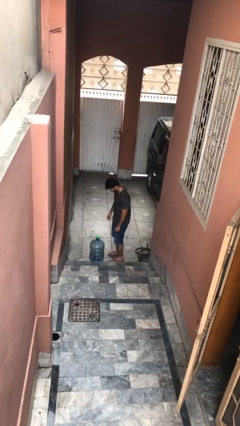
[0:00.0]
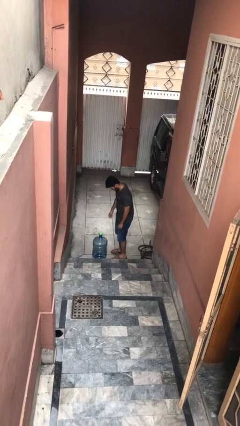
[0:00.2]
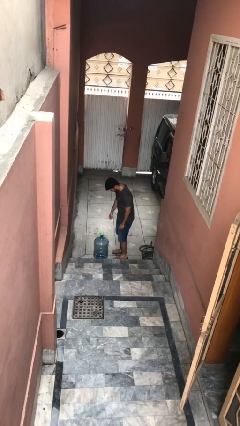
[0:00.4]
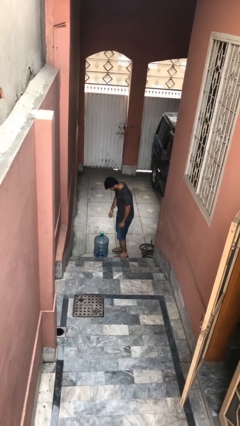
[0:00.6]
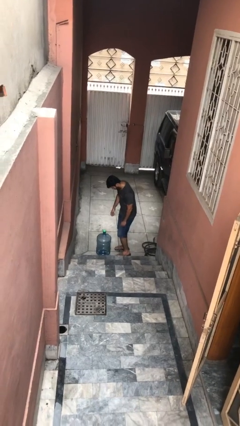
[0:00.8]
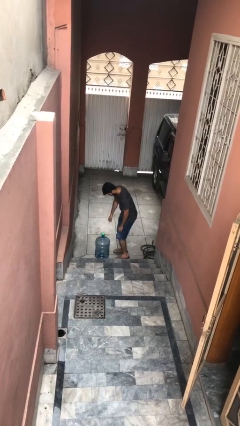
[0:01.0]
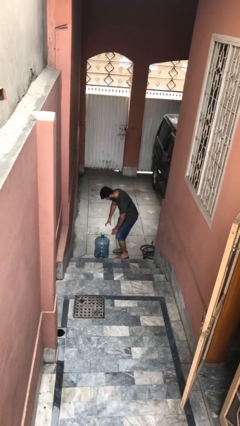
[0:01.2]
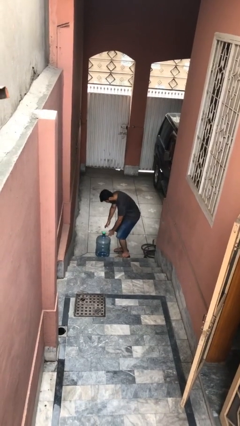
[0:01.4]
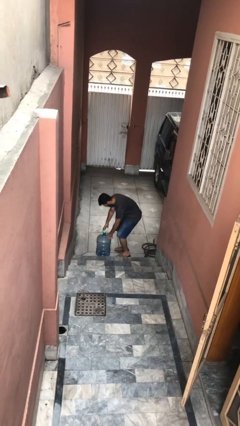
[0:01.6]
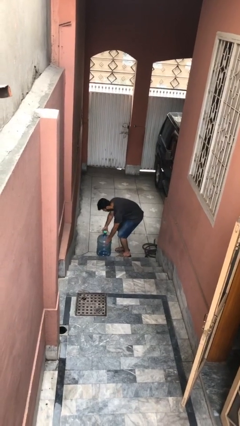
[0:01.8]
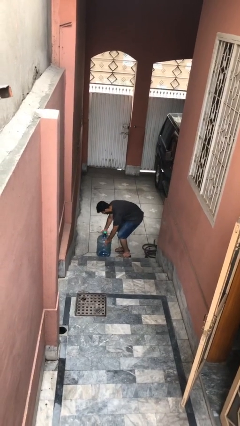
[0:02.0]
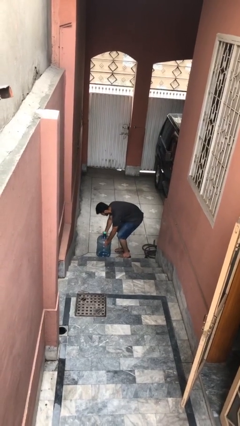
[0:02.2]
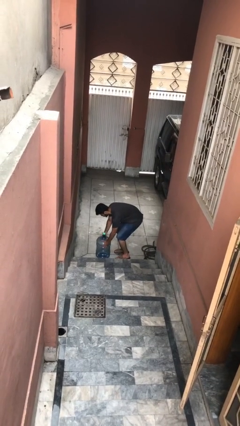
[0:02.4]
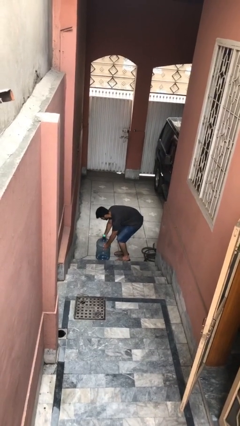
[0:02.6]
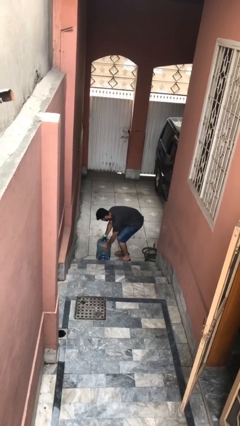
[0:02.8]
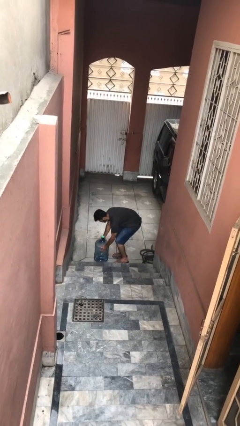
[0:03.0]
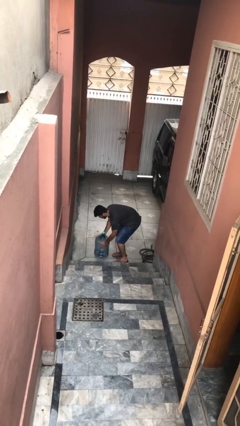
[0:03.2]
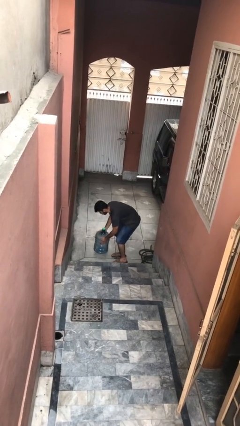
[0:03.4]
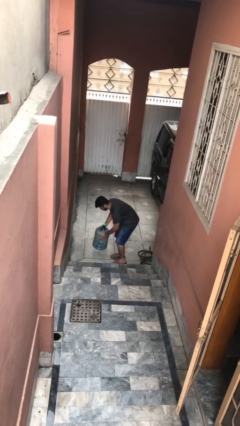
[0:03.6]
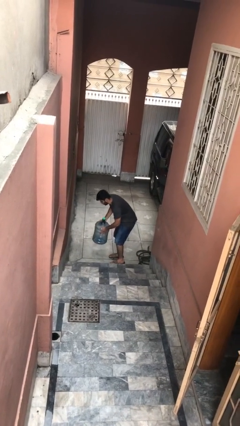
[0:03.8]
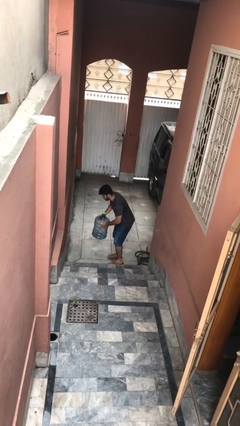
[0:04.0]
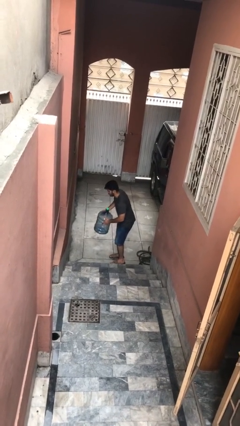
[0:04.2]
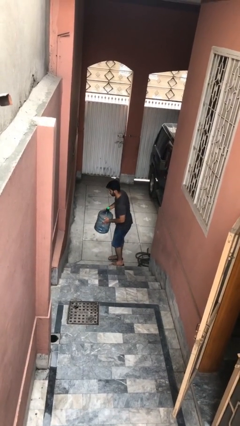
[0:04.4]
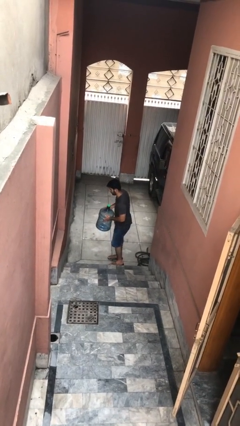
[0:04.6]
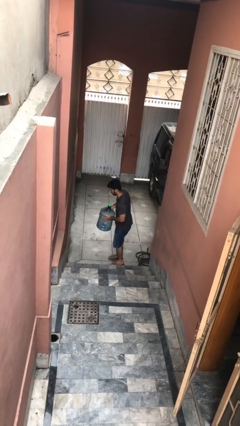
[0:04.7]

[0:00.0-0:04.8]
person picks up object from floor

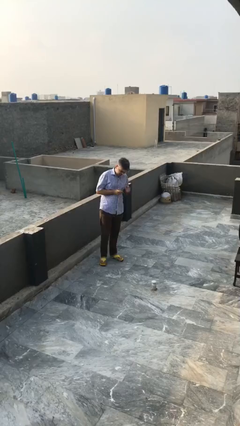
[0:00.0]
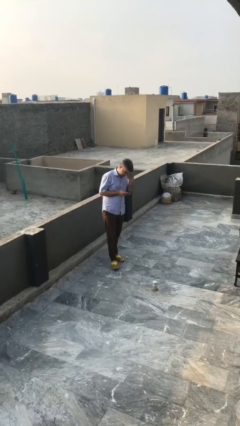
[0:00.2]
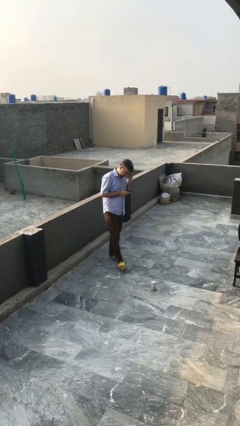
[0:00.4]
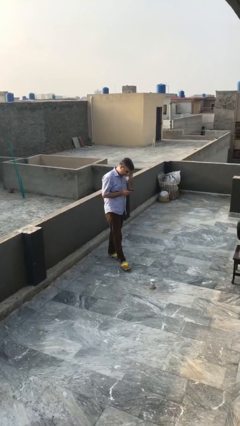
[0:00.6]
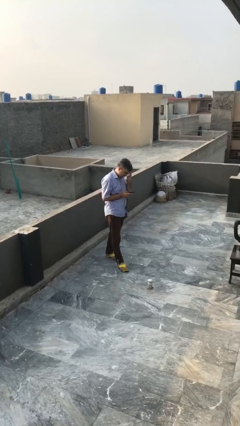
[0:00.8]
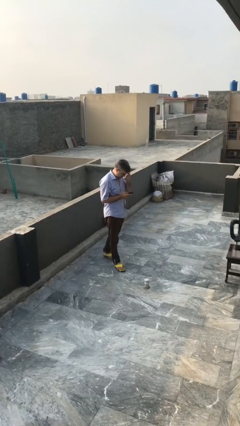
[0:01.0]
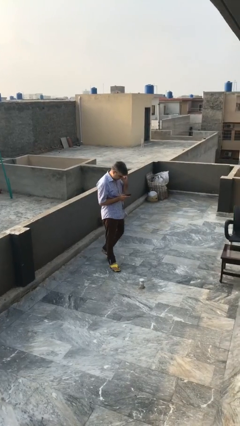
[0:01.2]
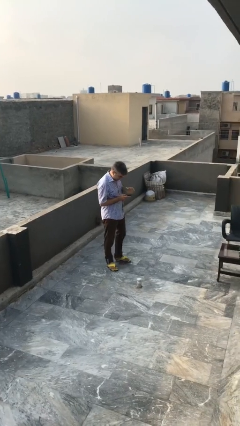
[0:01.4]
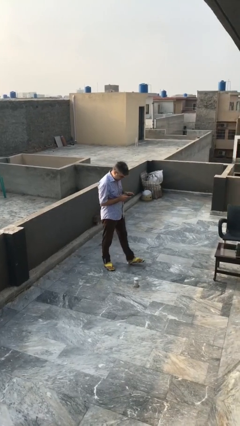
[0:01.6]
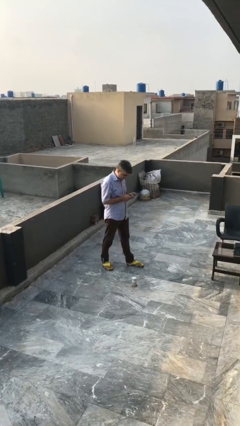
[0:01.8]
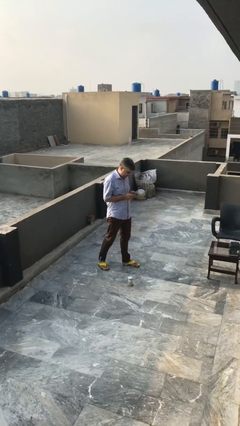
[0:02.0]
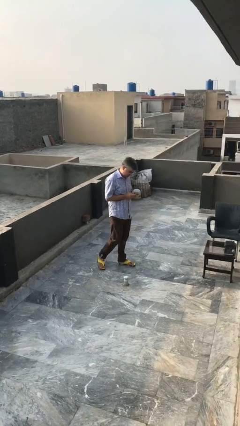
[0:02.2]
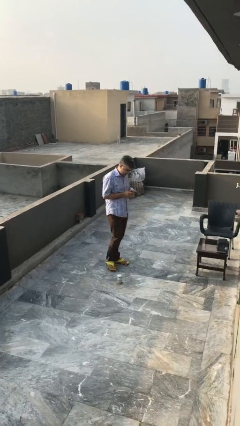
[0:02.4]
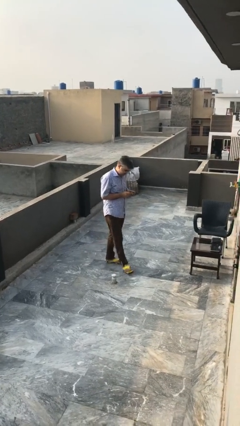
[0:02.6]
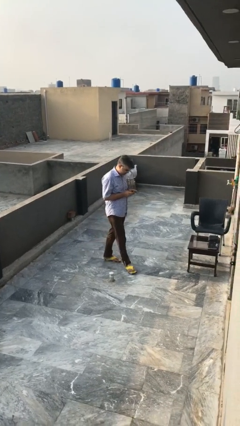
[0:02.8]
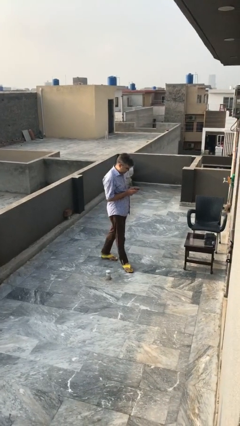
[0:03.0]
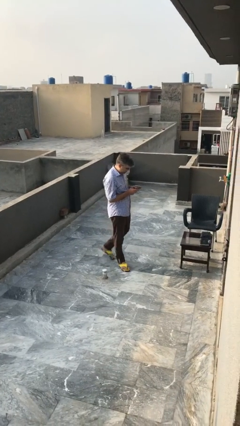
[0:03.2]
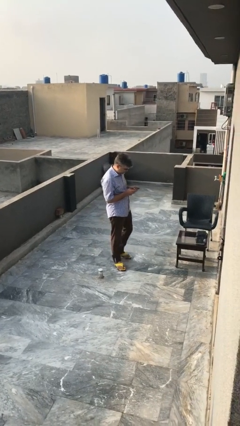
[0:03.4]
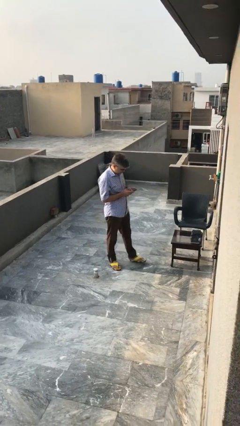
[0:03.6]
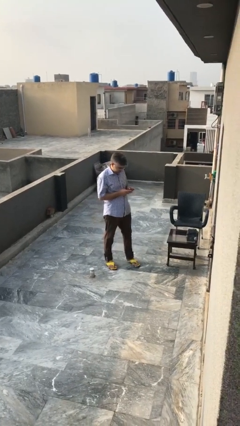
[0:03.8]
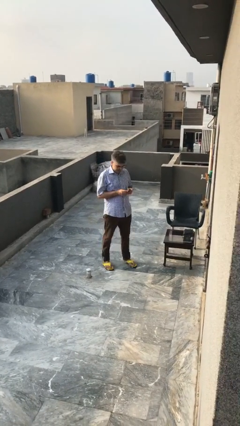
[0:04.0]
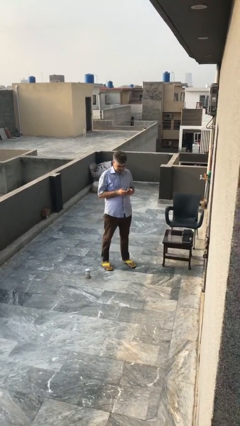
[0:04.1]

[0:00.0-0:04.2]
person texts on phone

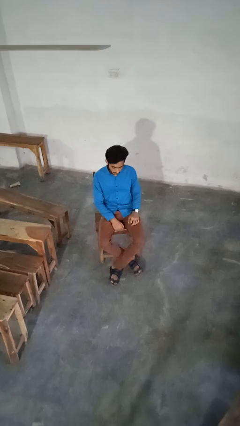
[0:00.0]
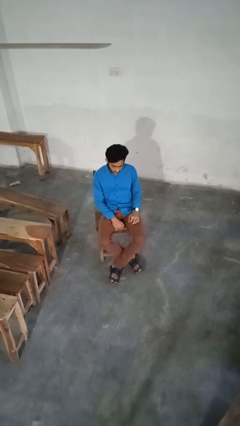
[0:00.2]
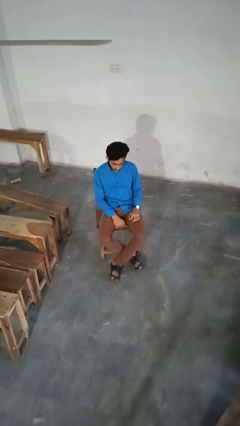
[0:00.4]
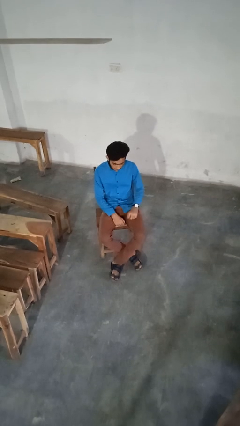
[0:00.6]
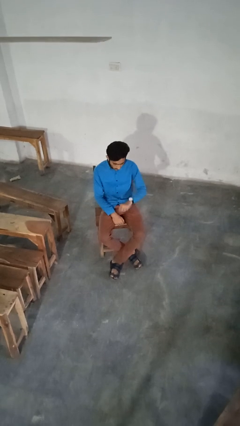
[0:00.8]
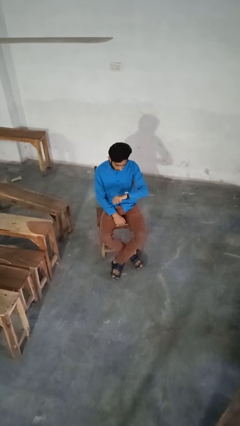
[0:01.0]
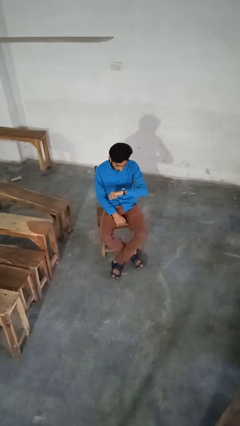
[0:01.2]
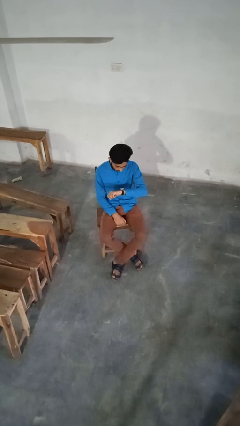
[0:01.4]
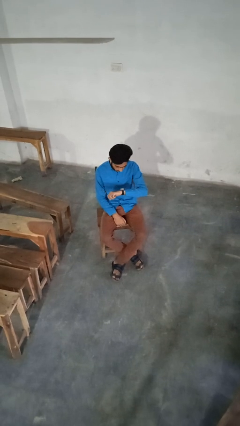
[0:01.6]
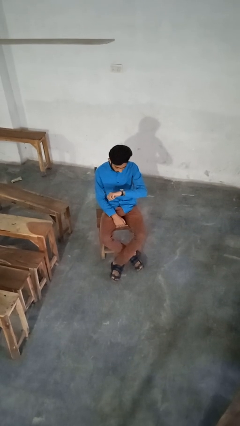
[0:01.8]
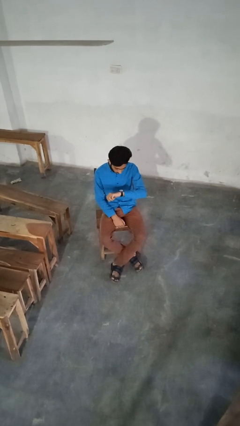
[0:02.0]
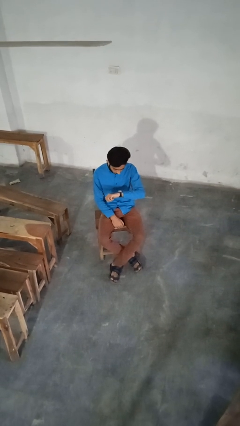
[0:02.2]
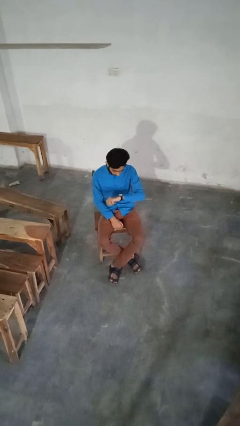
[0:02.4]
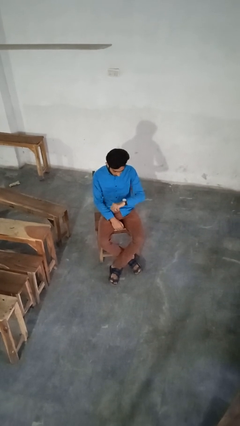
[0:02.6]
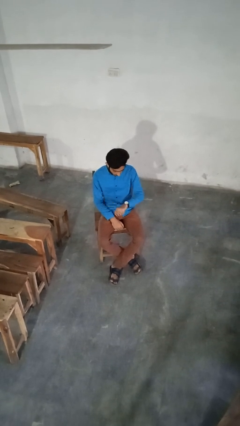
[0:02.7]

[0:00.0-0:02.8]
person looks at wristwatch

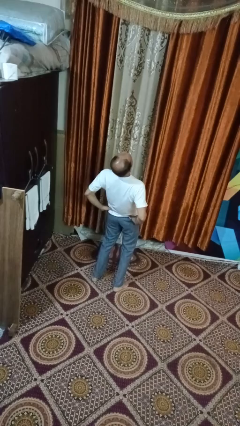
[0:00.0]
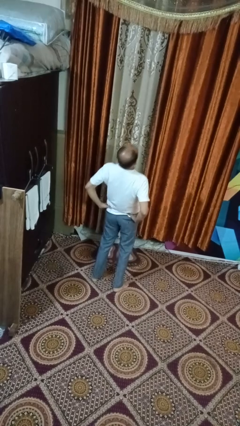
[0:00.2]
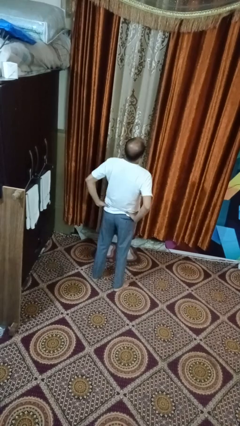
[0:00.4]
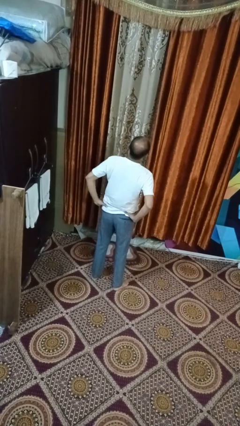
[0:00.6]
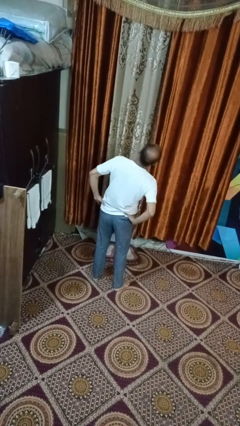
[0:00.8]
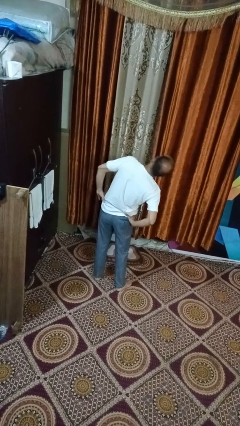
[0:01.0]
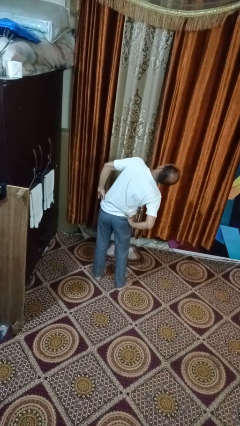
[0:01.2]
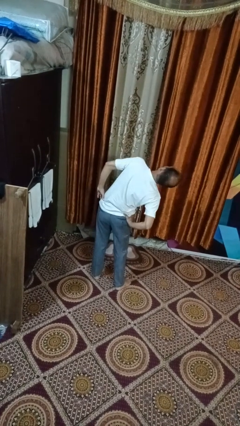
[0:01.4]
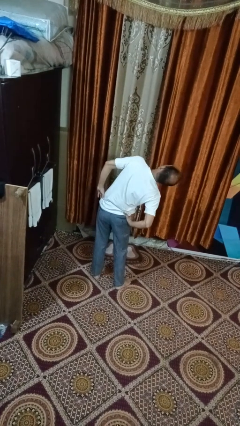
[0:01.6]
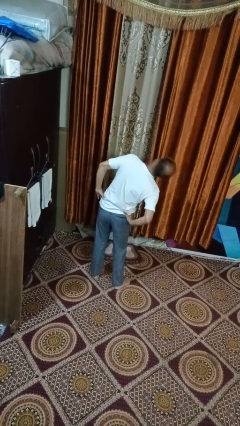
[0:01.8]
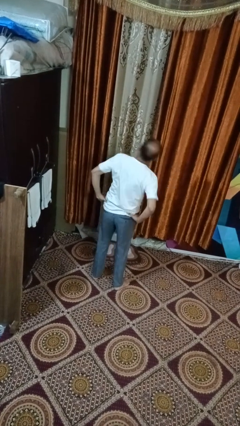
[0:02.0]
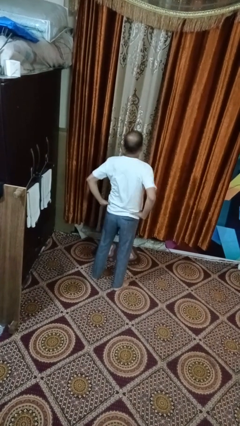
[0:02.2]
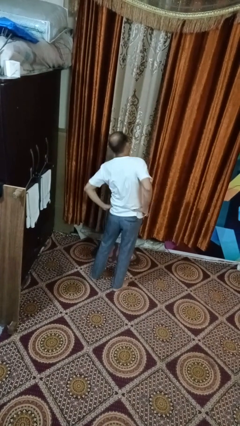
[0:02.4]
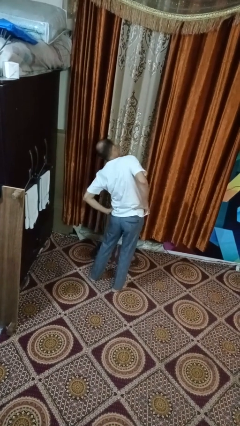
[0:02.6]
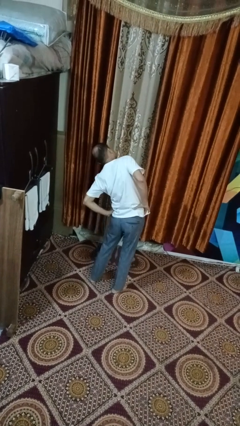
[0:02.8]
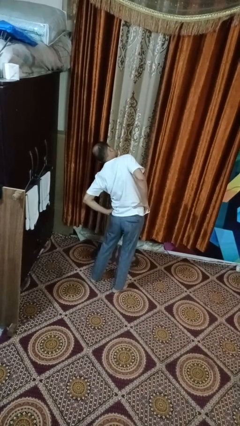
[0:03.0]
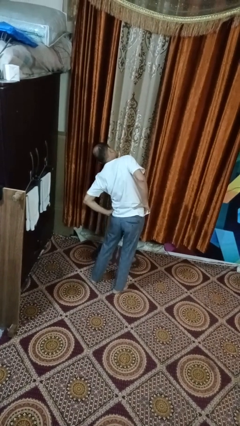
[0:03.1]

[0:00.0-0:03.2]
person stretches arms to side

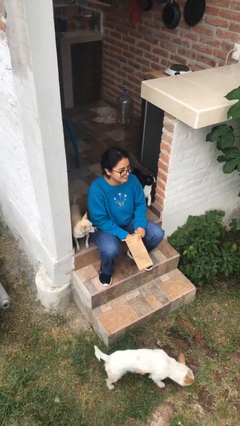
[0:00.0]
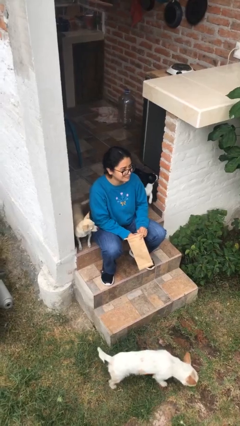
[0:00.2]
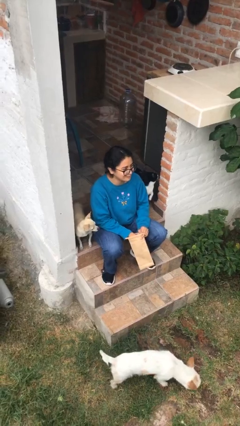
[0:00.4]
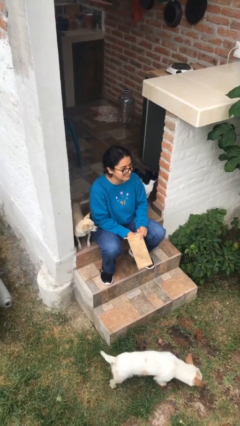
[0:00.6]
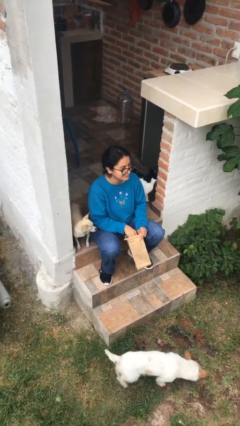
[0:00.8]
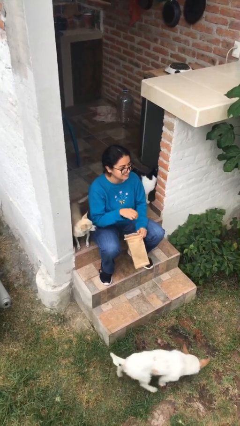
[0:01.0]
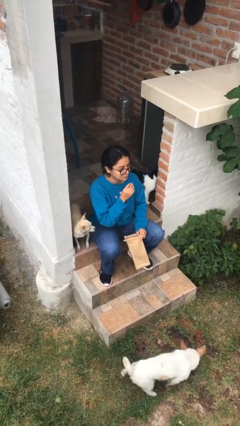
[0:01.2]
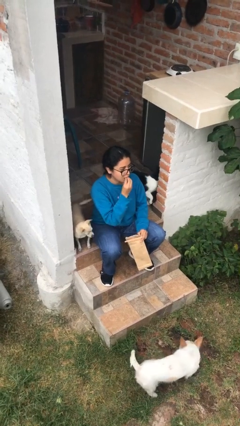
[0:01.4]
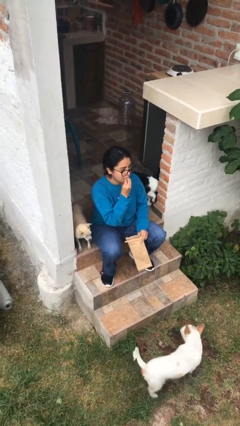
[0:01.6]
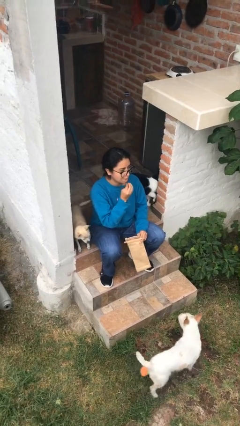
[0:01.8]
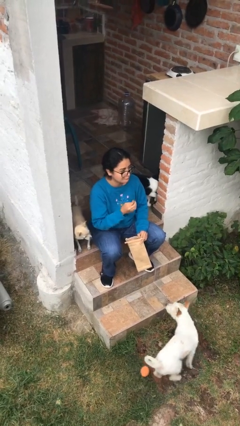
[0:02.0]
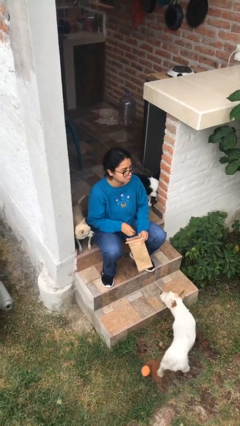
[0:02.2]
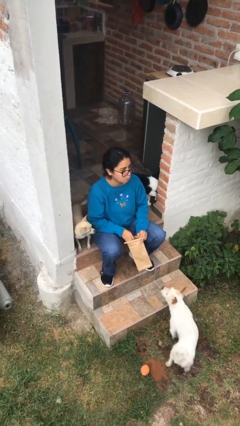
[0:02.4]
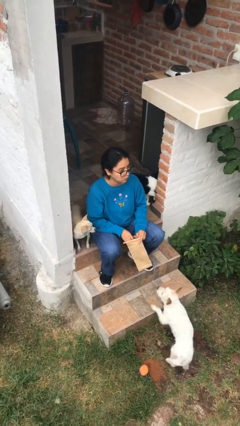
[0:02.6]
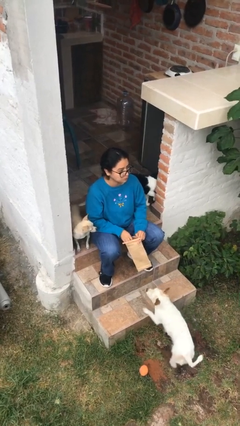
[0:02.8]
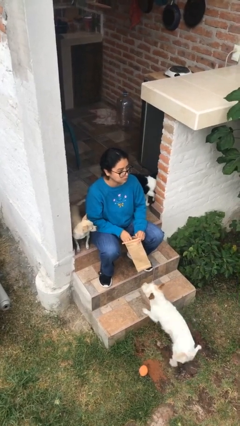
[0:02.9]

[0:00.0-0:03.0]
person eats snack from bag
